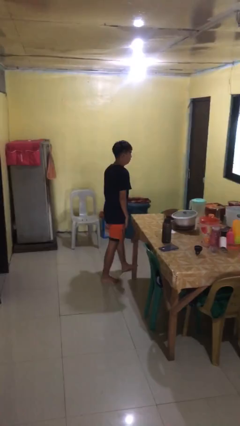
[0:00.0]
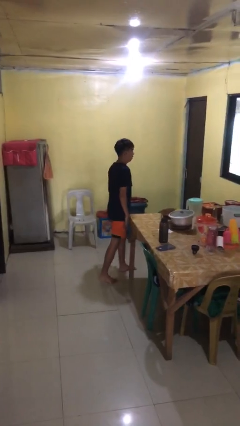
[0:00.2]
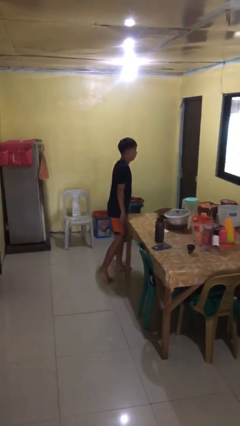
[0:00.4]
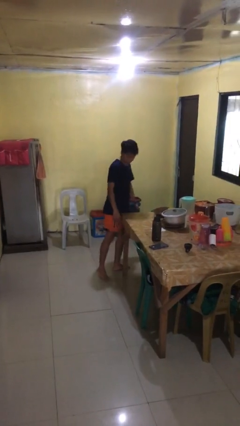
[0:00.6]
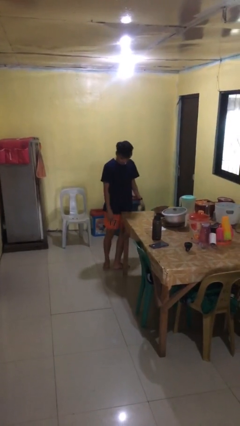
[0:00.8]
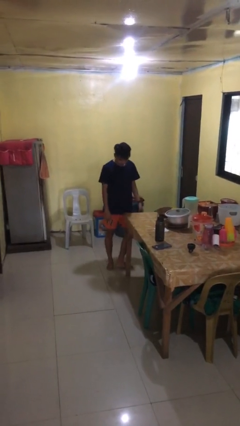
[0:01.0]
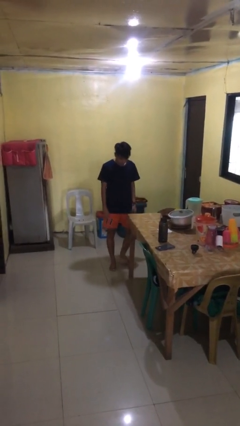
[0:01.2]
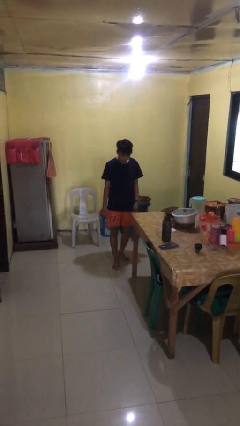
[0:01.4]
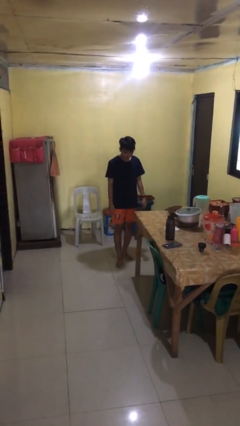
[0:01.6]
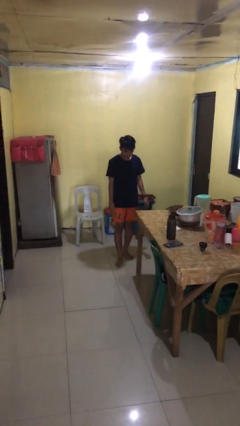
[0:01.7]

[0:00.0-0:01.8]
person bumps into table

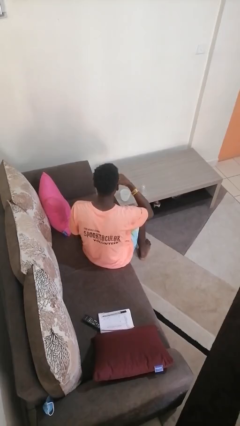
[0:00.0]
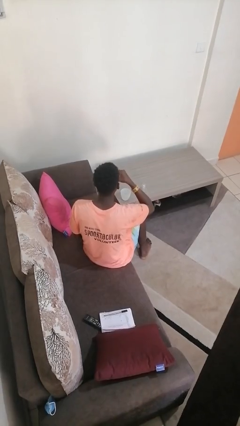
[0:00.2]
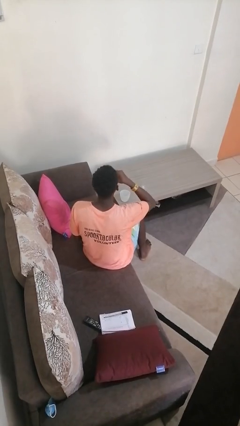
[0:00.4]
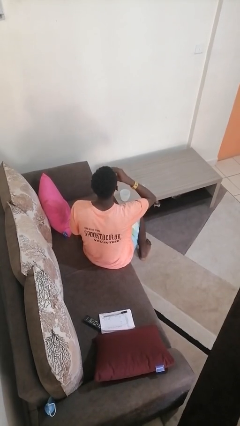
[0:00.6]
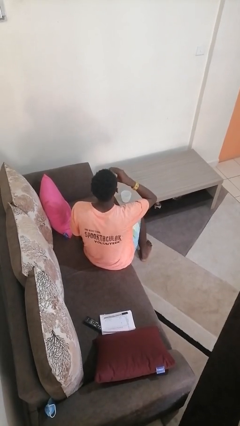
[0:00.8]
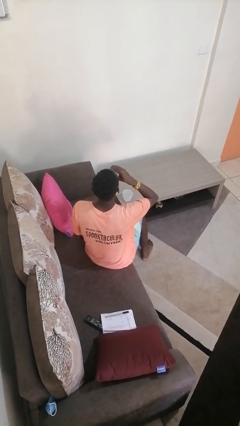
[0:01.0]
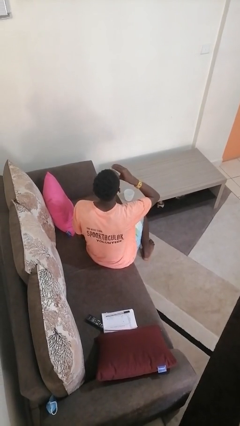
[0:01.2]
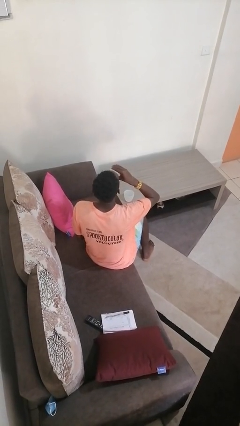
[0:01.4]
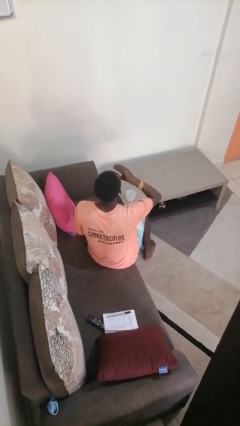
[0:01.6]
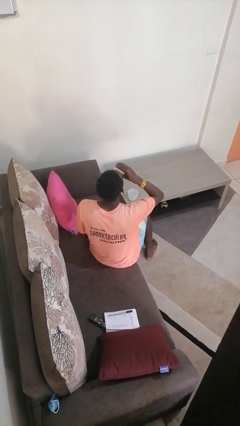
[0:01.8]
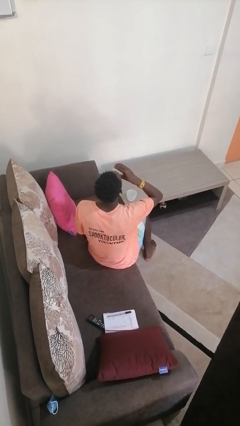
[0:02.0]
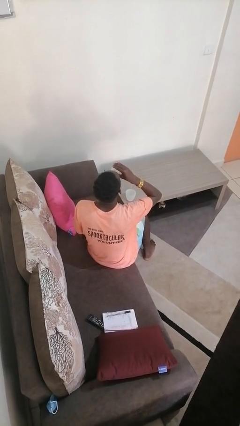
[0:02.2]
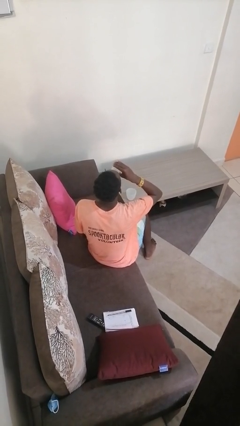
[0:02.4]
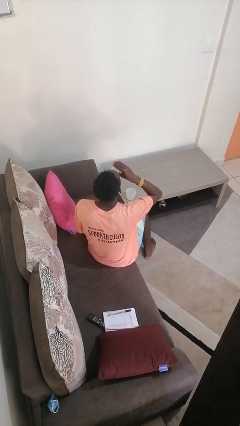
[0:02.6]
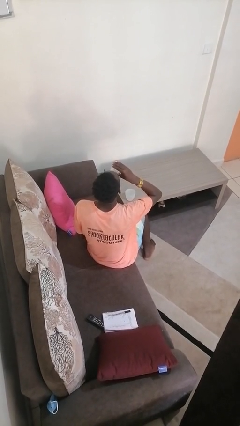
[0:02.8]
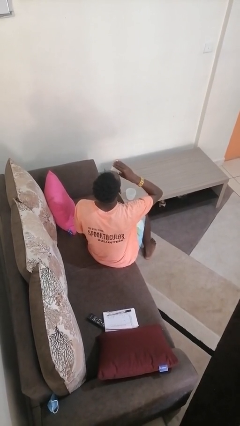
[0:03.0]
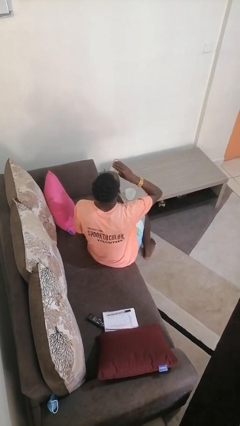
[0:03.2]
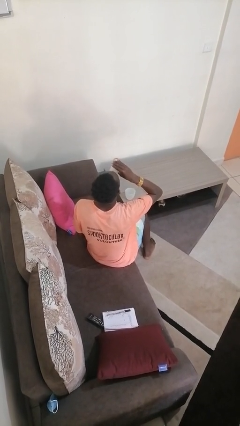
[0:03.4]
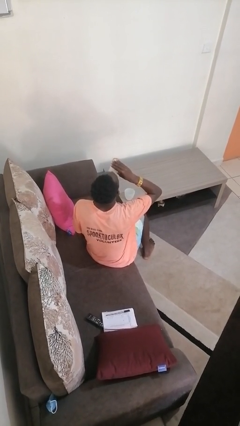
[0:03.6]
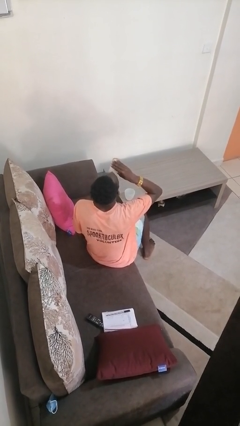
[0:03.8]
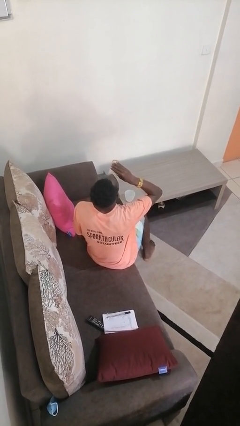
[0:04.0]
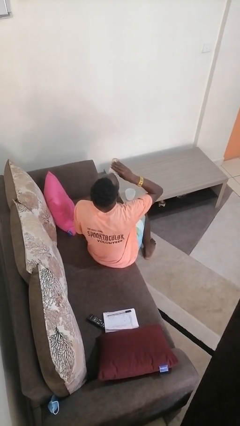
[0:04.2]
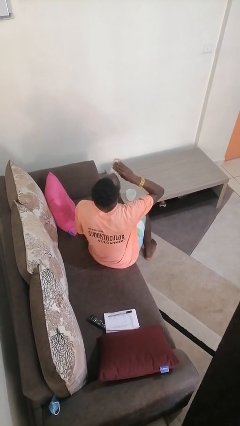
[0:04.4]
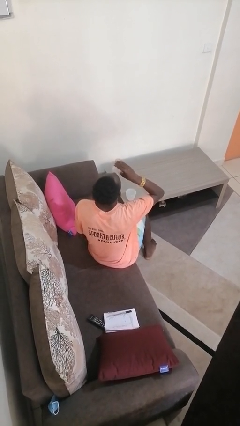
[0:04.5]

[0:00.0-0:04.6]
person drinks from shotglass

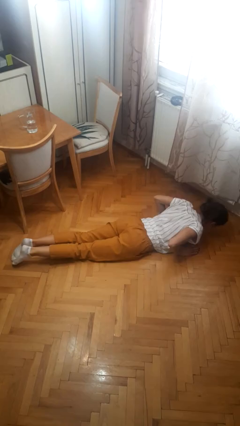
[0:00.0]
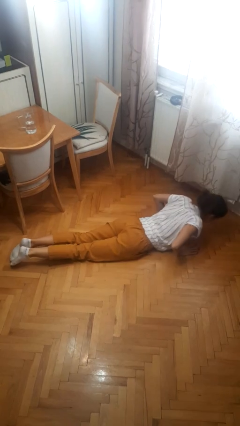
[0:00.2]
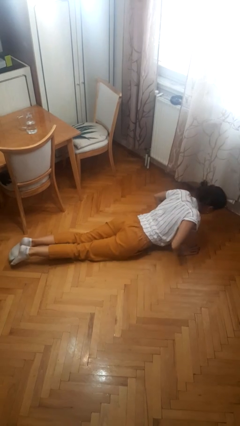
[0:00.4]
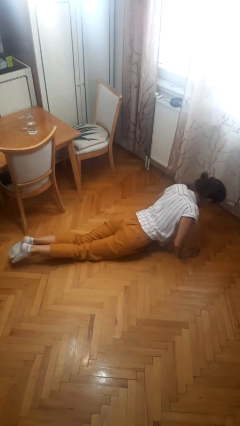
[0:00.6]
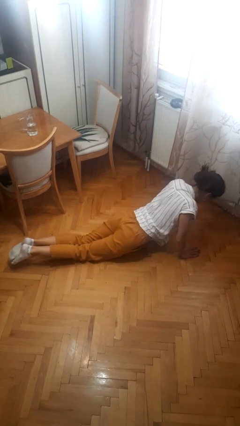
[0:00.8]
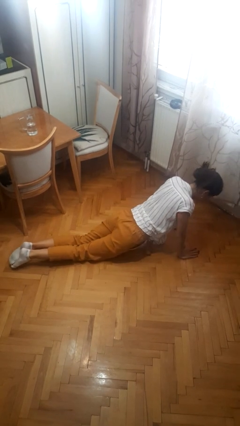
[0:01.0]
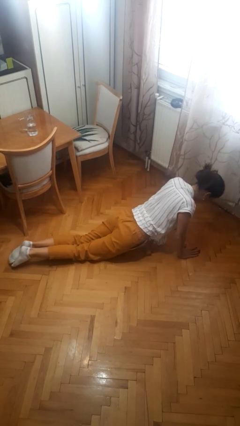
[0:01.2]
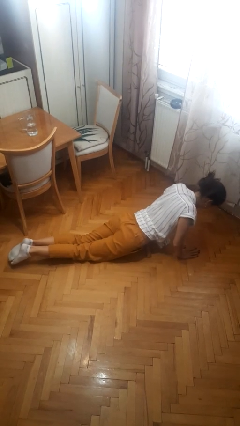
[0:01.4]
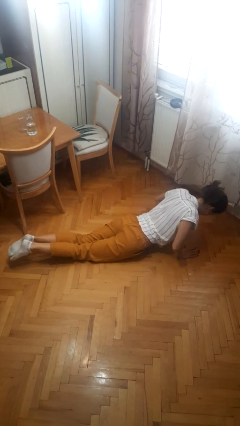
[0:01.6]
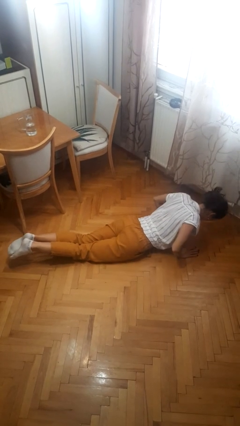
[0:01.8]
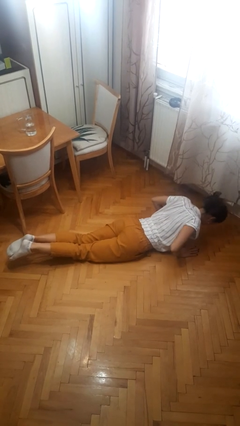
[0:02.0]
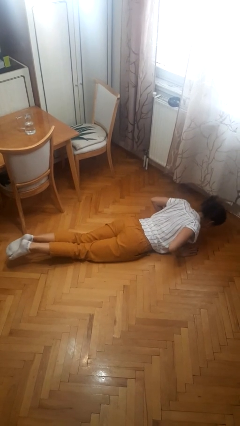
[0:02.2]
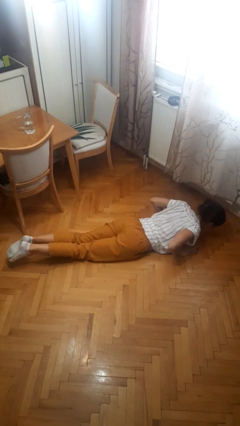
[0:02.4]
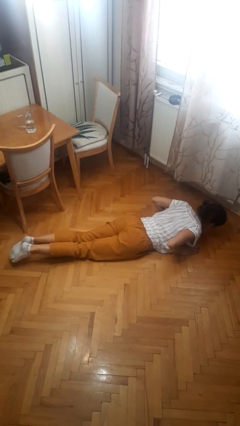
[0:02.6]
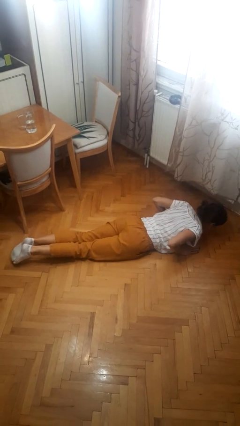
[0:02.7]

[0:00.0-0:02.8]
person exercises with pushup

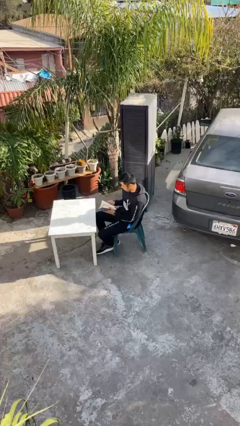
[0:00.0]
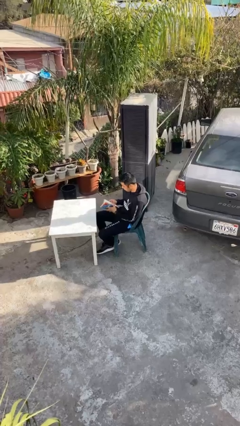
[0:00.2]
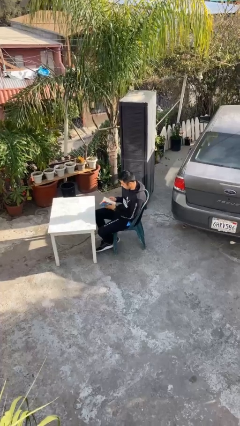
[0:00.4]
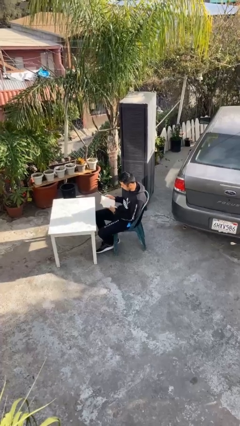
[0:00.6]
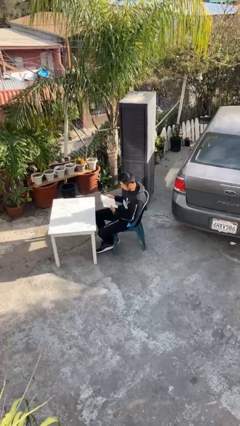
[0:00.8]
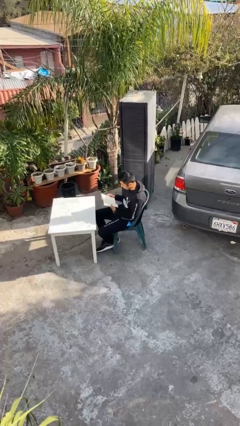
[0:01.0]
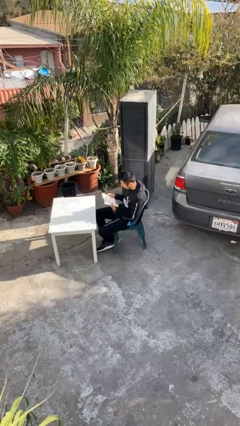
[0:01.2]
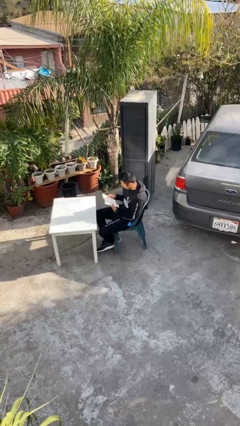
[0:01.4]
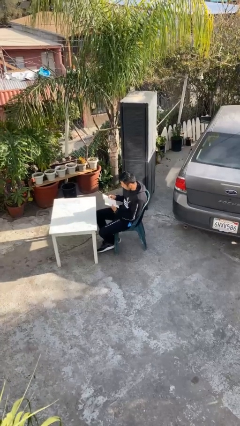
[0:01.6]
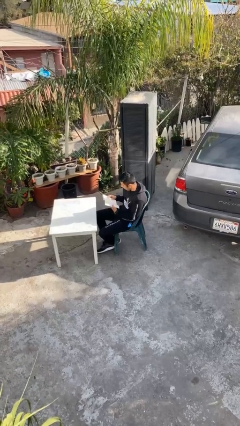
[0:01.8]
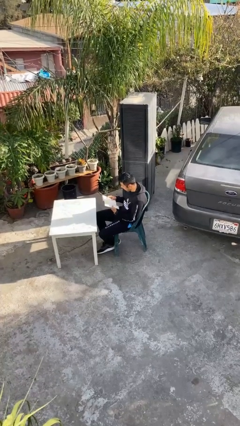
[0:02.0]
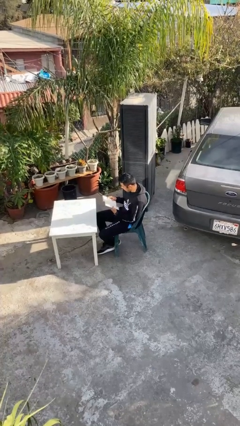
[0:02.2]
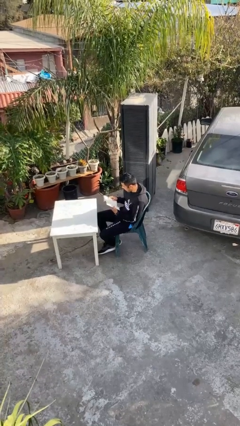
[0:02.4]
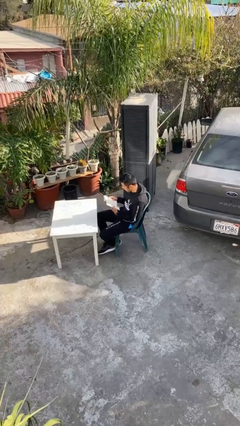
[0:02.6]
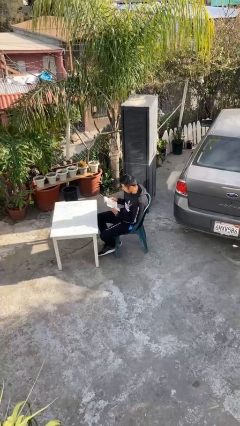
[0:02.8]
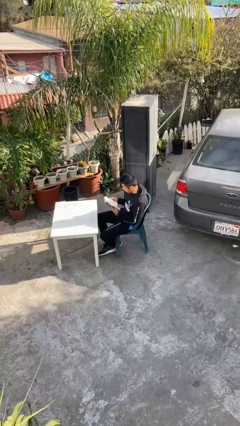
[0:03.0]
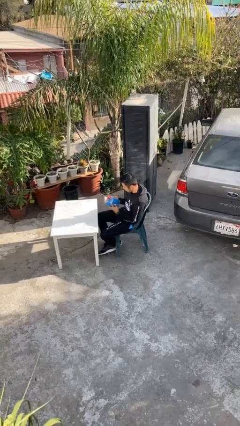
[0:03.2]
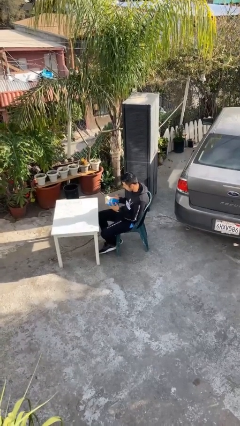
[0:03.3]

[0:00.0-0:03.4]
person reads document

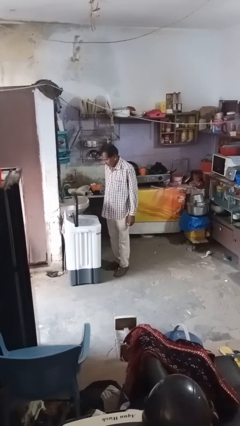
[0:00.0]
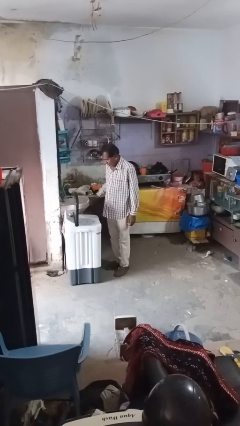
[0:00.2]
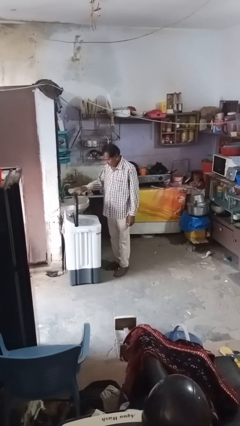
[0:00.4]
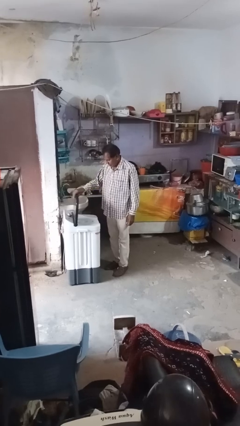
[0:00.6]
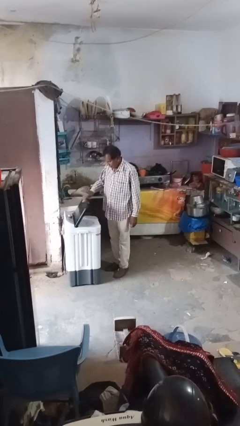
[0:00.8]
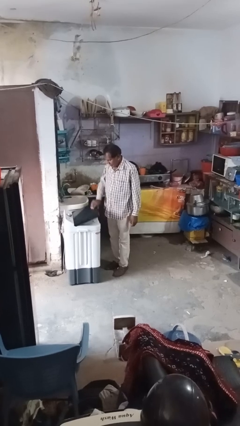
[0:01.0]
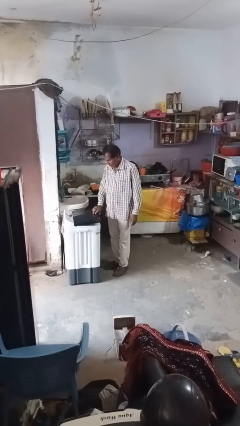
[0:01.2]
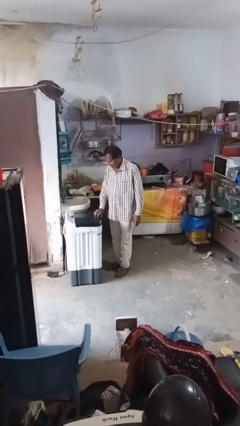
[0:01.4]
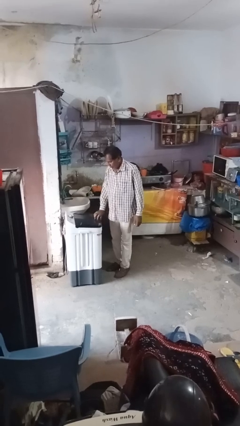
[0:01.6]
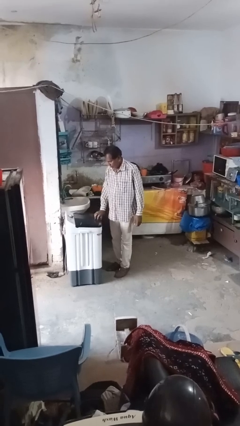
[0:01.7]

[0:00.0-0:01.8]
person closes clothes washer

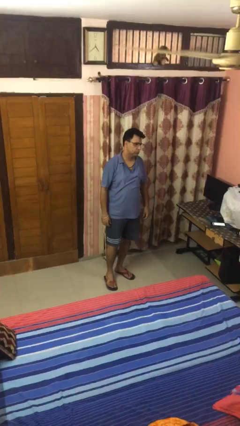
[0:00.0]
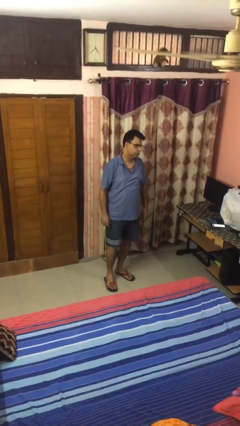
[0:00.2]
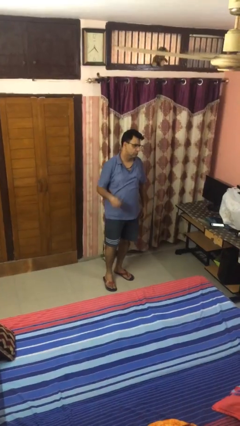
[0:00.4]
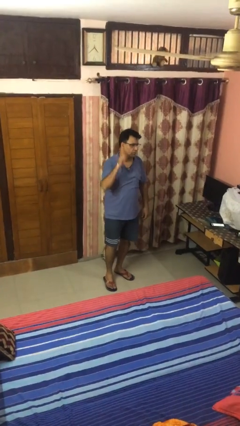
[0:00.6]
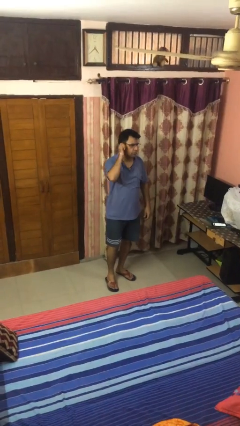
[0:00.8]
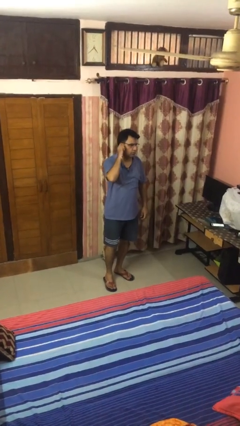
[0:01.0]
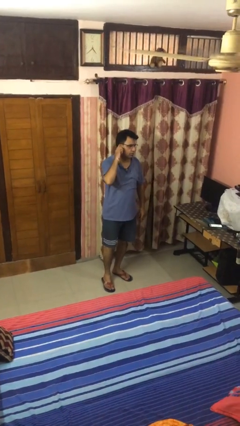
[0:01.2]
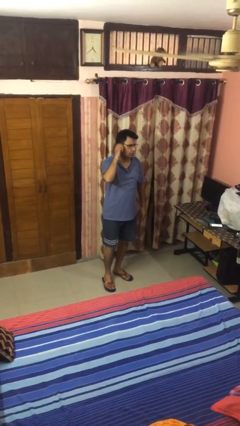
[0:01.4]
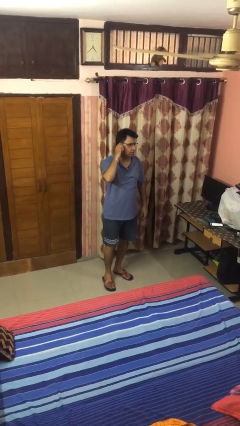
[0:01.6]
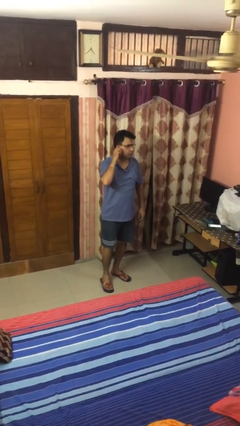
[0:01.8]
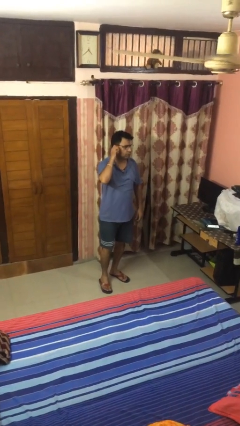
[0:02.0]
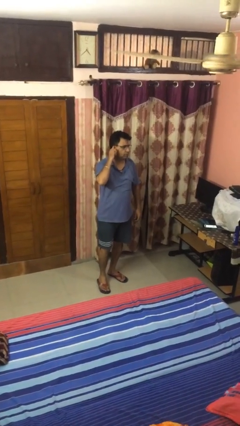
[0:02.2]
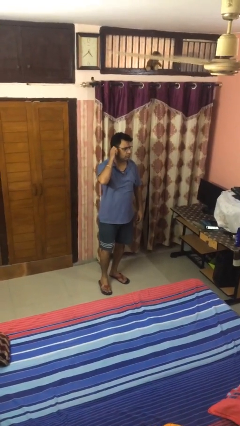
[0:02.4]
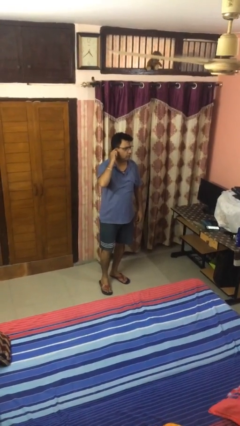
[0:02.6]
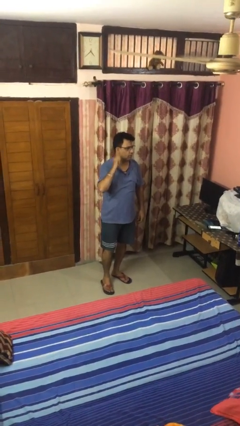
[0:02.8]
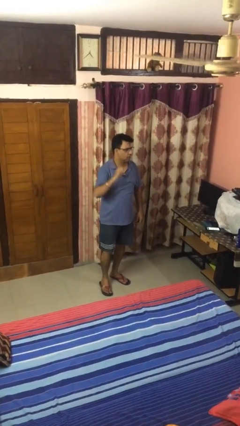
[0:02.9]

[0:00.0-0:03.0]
person touches earlobe
